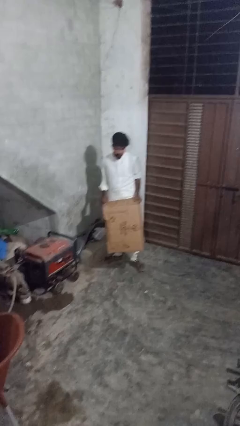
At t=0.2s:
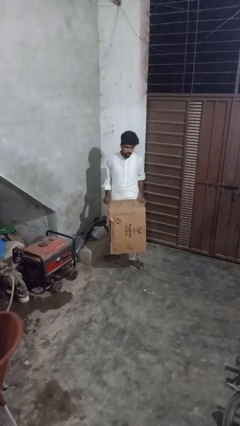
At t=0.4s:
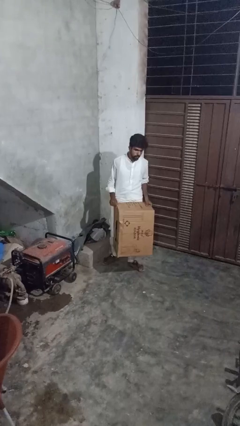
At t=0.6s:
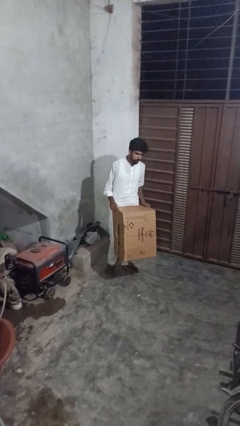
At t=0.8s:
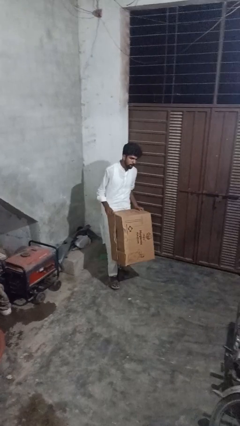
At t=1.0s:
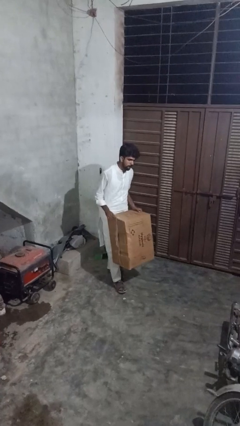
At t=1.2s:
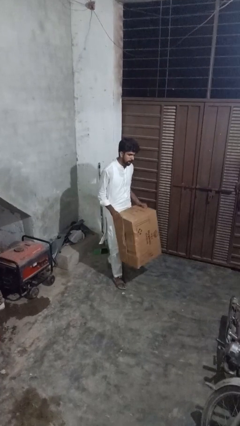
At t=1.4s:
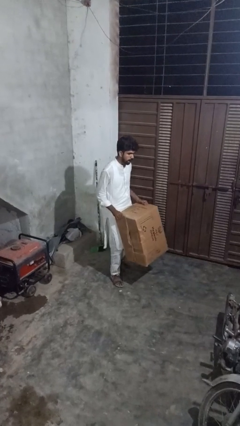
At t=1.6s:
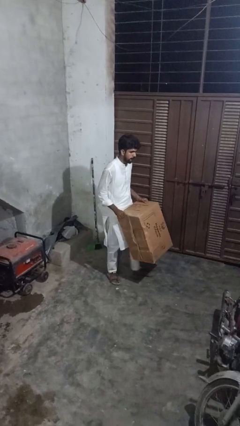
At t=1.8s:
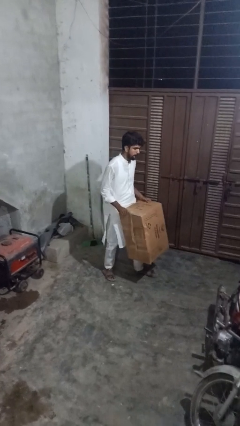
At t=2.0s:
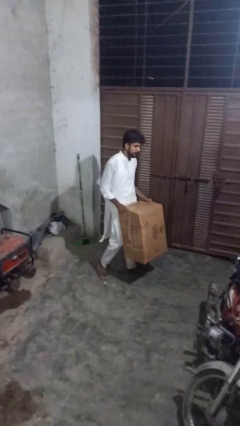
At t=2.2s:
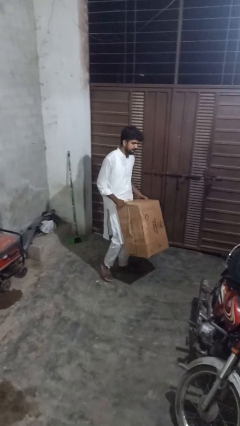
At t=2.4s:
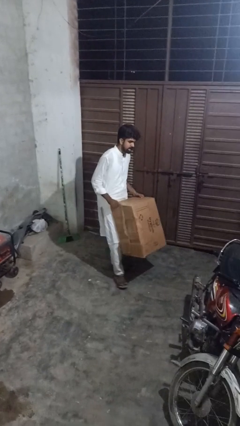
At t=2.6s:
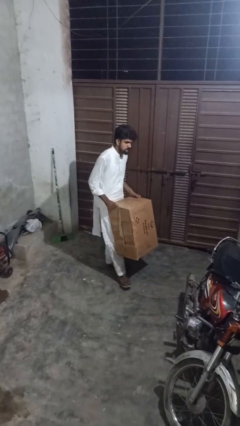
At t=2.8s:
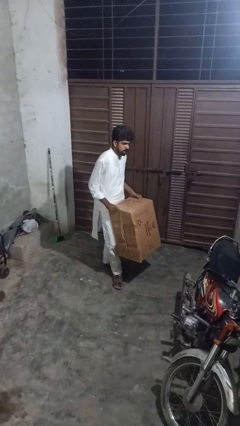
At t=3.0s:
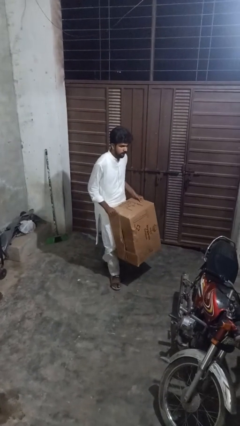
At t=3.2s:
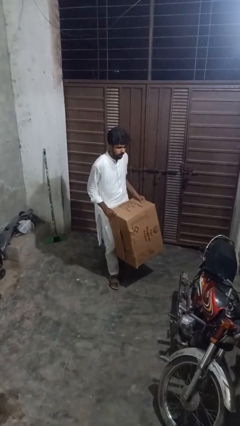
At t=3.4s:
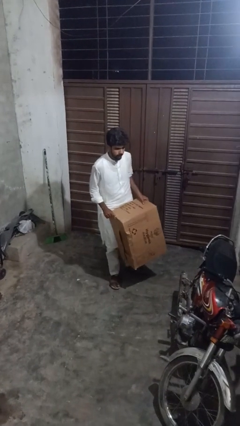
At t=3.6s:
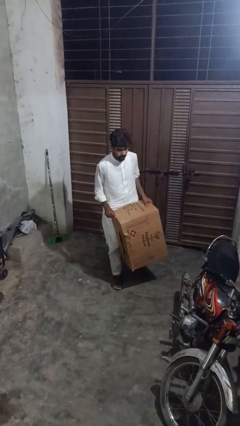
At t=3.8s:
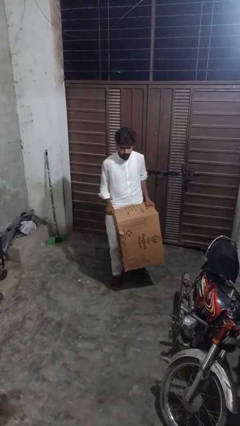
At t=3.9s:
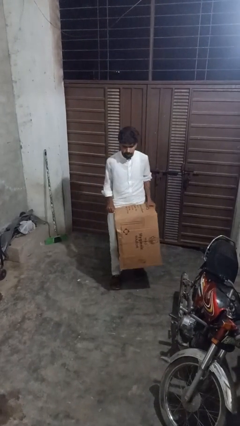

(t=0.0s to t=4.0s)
person carries laundry basket

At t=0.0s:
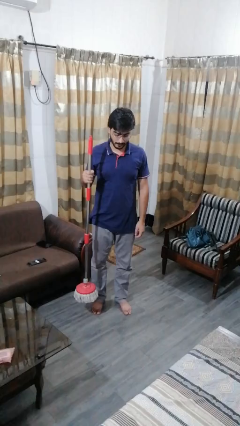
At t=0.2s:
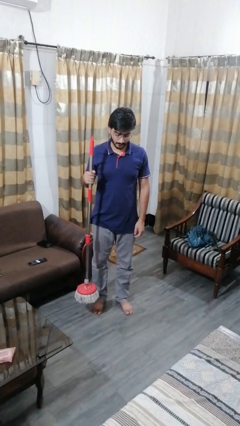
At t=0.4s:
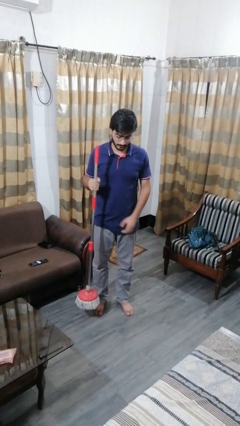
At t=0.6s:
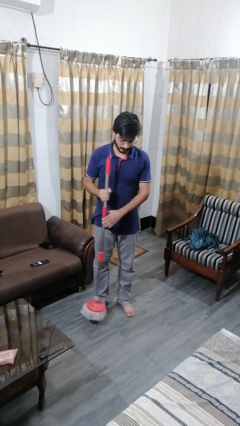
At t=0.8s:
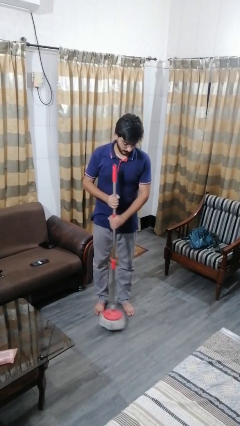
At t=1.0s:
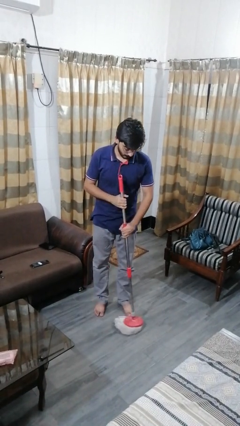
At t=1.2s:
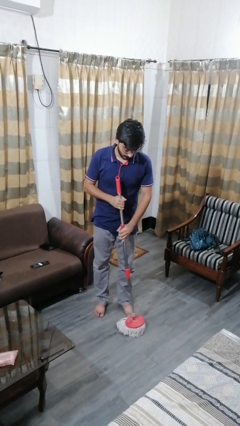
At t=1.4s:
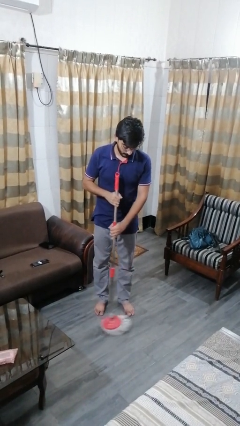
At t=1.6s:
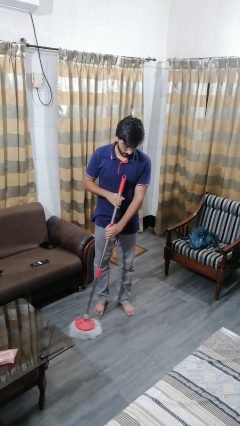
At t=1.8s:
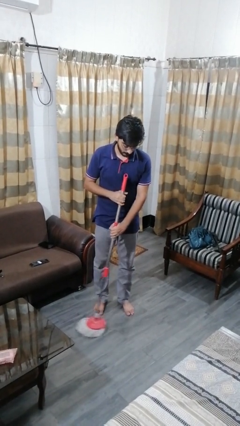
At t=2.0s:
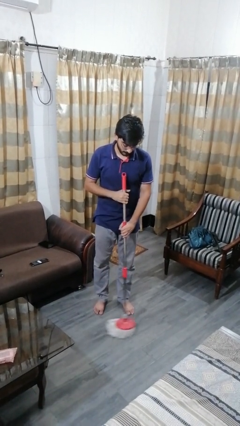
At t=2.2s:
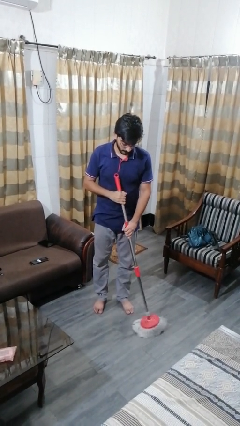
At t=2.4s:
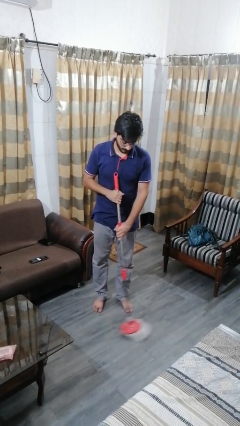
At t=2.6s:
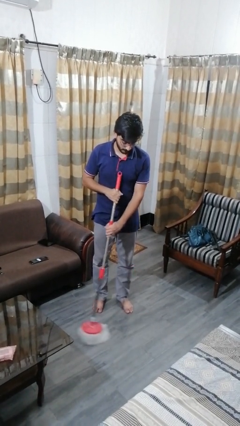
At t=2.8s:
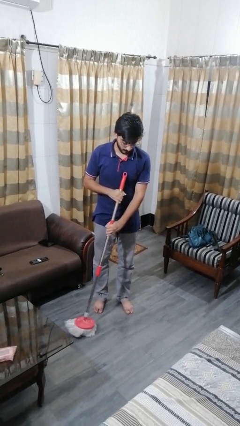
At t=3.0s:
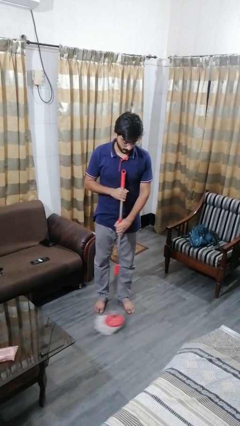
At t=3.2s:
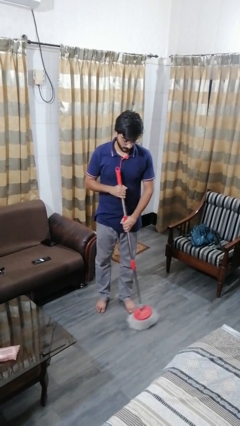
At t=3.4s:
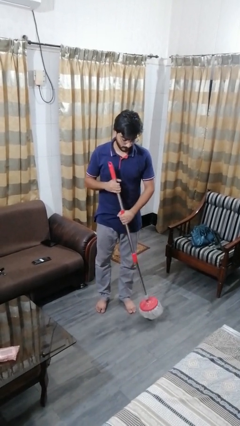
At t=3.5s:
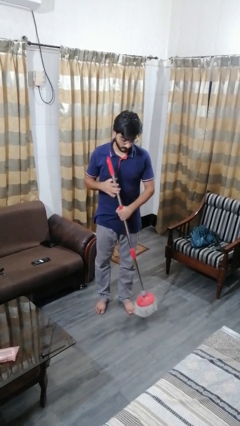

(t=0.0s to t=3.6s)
person sweeps floor

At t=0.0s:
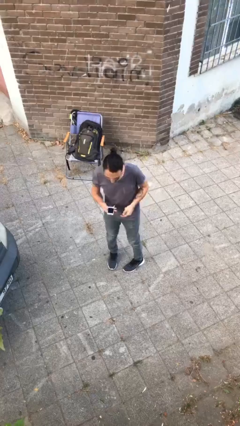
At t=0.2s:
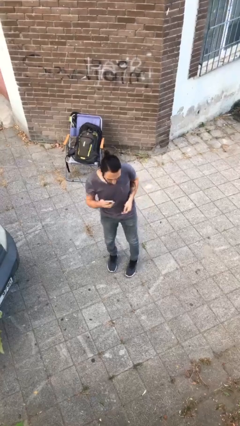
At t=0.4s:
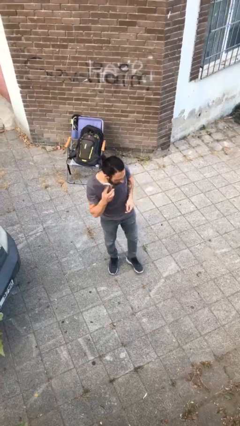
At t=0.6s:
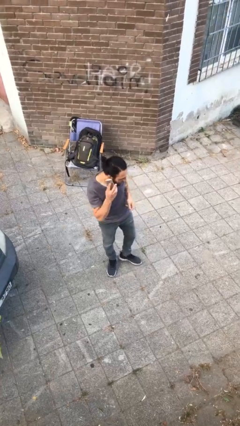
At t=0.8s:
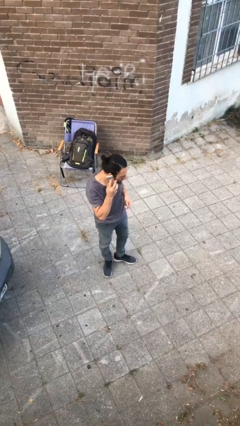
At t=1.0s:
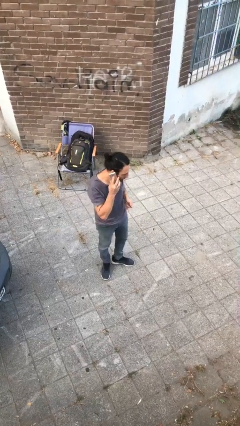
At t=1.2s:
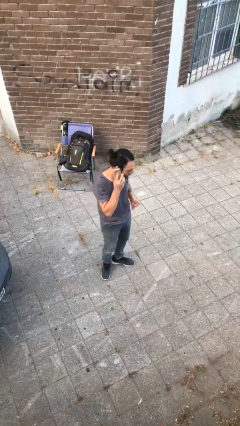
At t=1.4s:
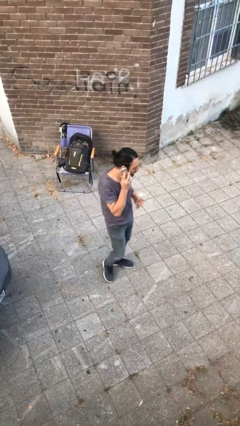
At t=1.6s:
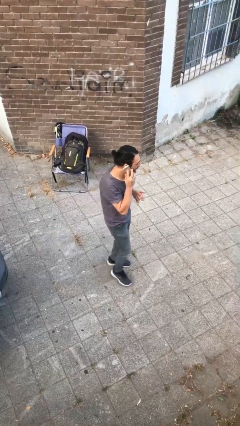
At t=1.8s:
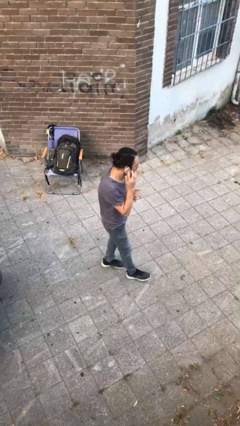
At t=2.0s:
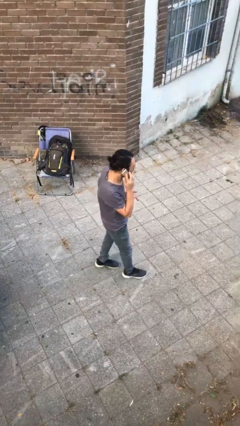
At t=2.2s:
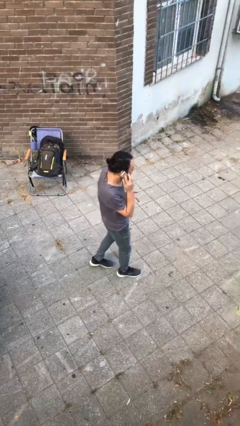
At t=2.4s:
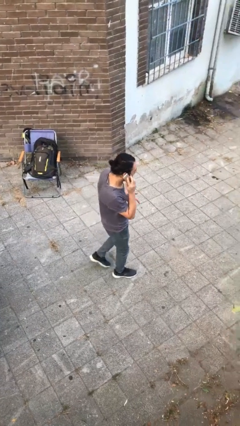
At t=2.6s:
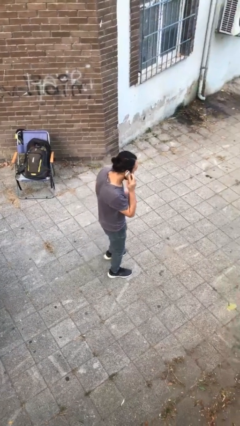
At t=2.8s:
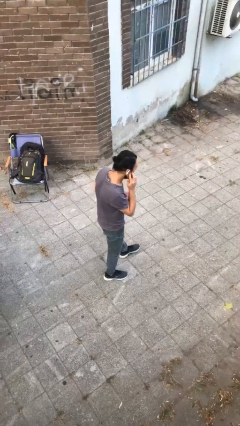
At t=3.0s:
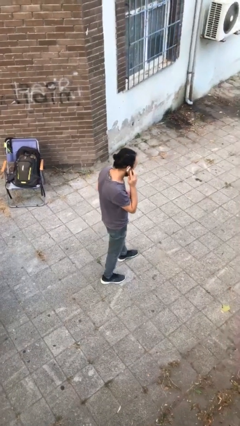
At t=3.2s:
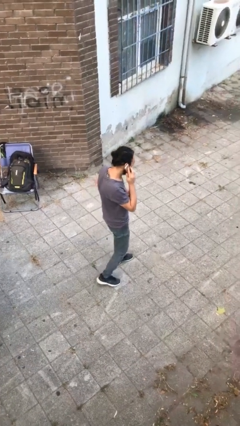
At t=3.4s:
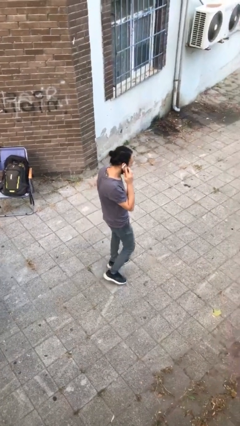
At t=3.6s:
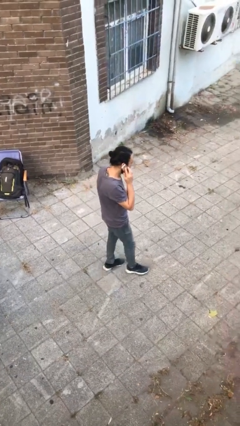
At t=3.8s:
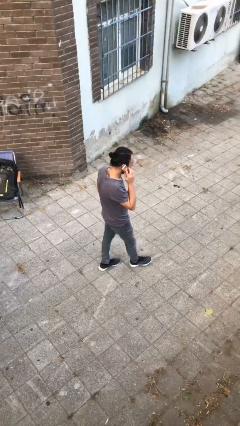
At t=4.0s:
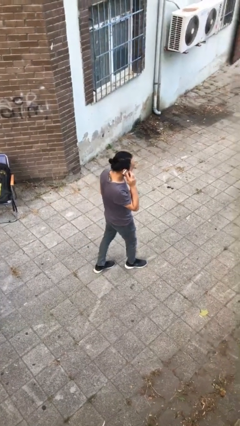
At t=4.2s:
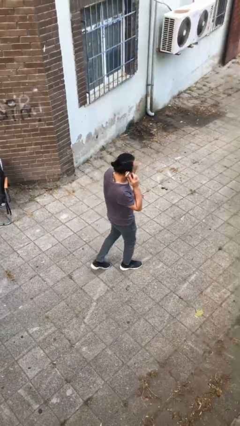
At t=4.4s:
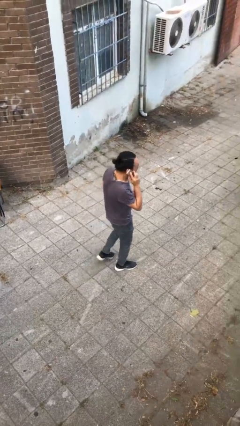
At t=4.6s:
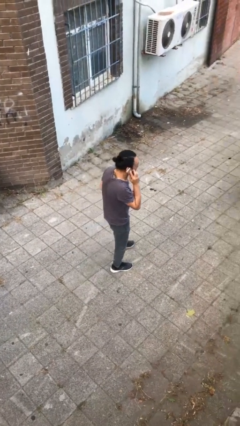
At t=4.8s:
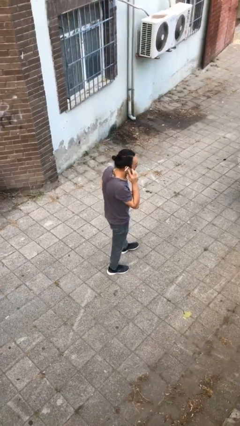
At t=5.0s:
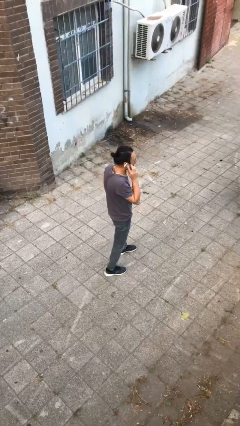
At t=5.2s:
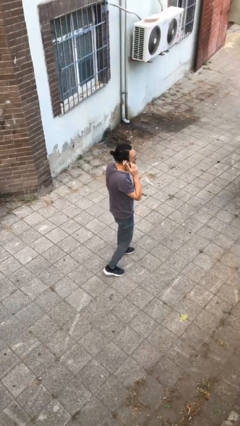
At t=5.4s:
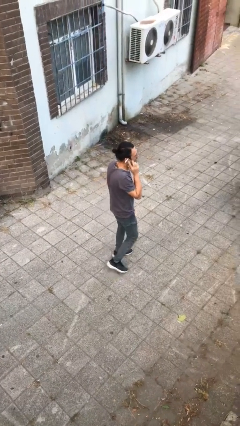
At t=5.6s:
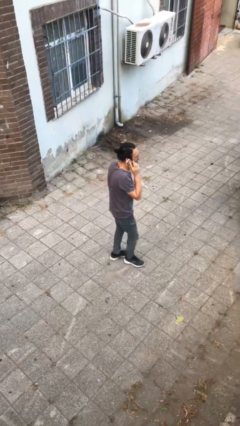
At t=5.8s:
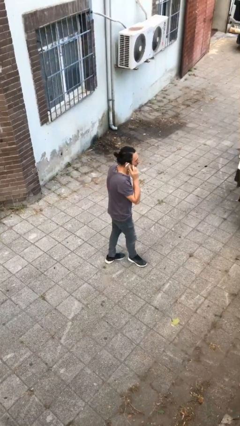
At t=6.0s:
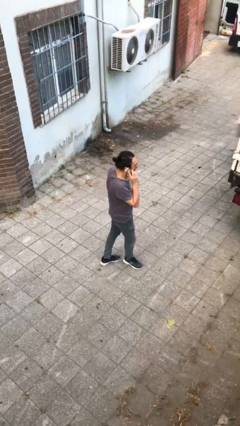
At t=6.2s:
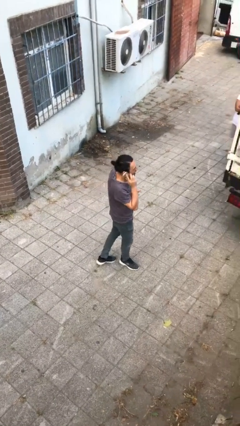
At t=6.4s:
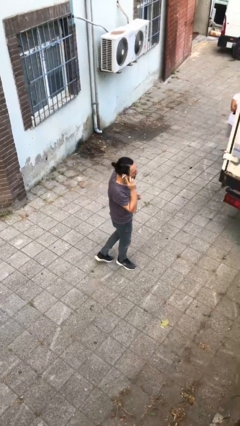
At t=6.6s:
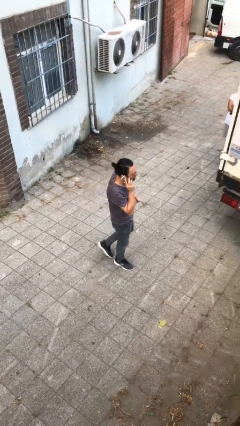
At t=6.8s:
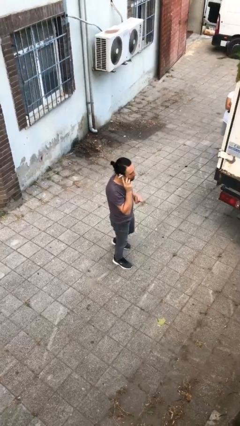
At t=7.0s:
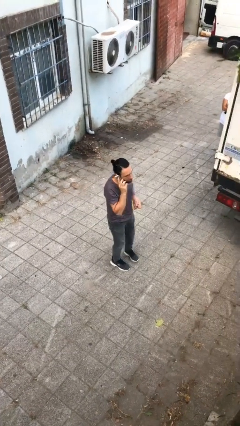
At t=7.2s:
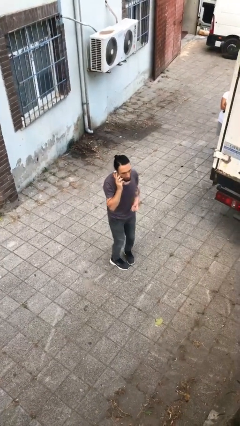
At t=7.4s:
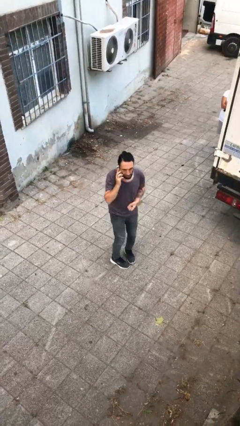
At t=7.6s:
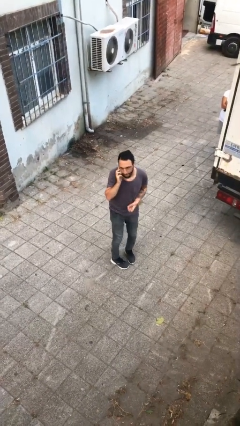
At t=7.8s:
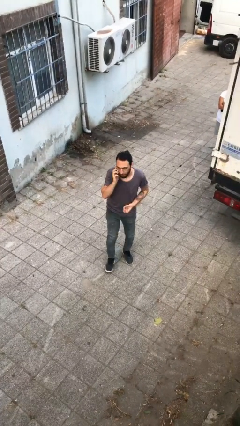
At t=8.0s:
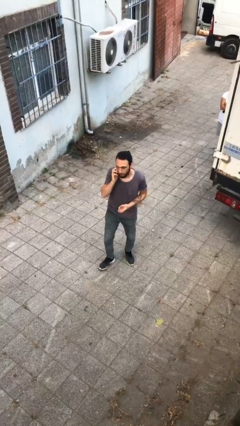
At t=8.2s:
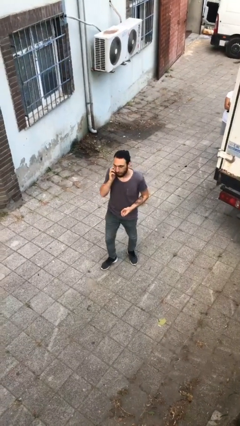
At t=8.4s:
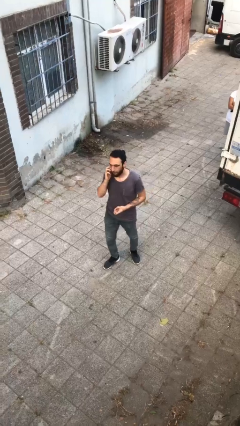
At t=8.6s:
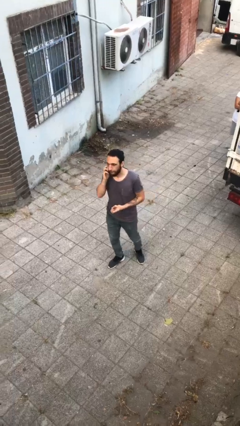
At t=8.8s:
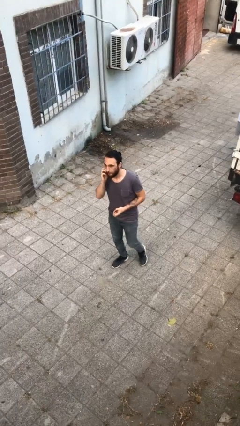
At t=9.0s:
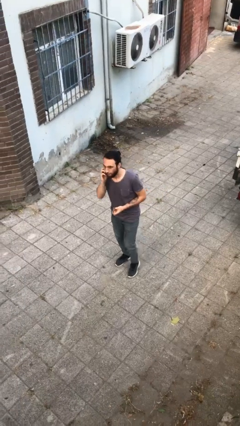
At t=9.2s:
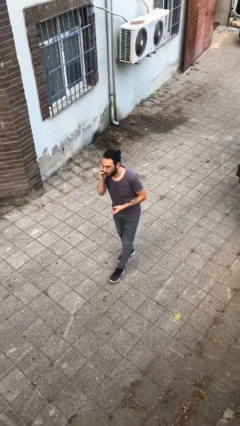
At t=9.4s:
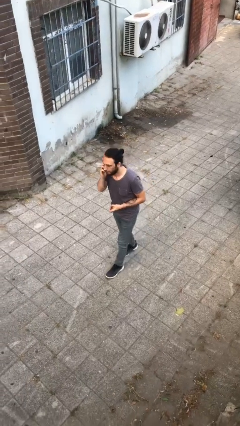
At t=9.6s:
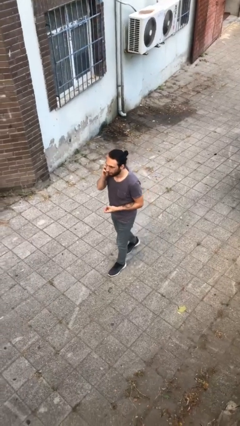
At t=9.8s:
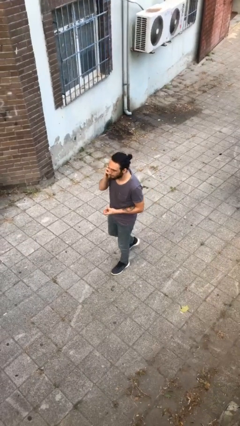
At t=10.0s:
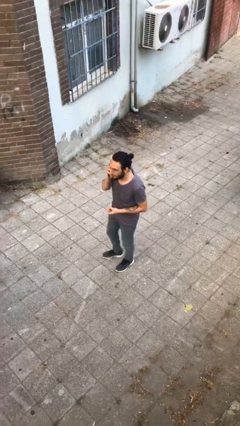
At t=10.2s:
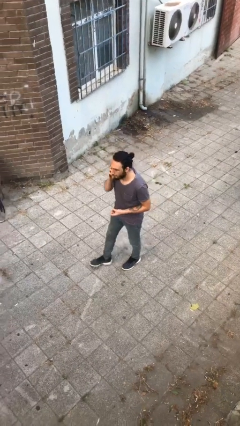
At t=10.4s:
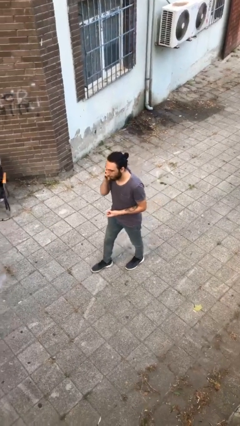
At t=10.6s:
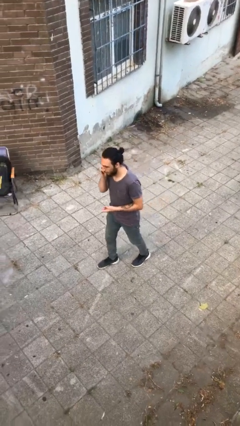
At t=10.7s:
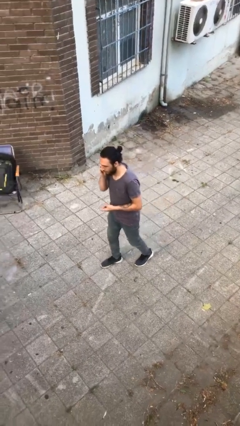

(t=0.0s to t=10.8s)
person talks on phone
